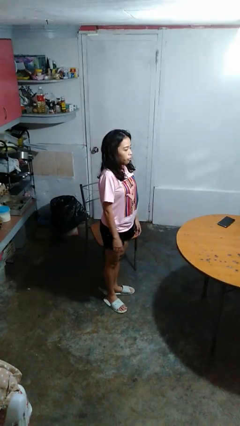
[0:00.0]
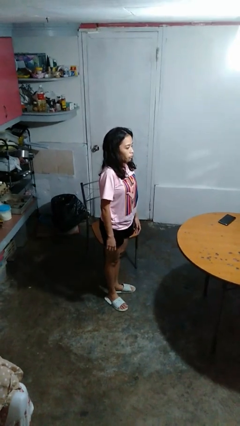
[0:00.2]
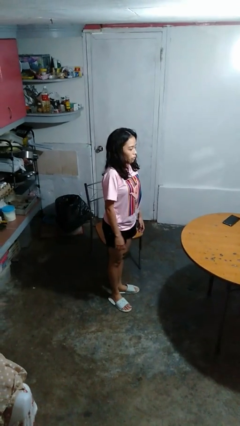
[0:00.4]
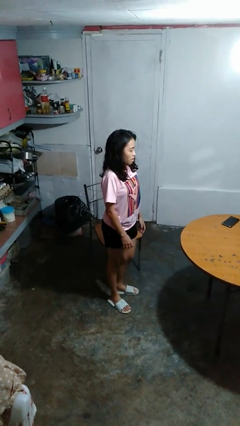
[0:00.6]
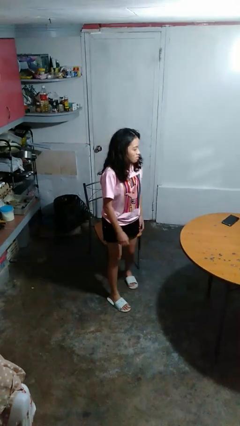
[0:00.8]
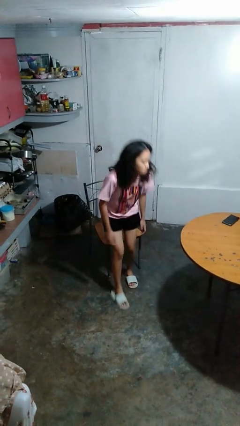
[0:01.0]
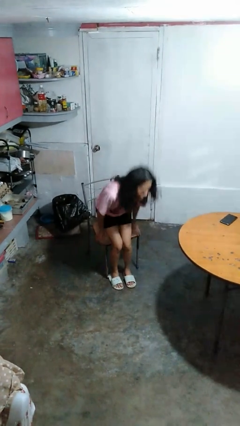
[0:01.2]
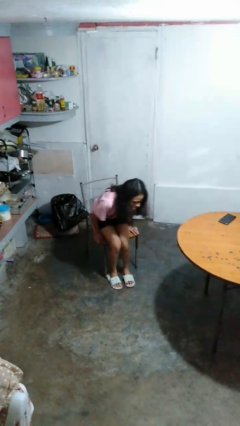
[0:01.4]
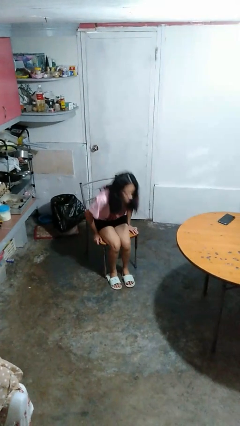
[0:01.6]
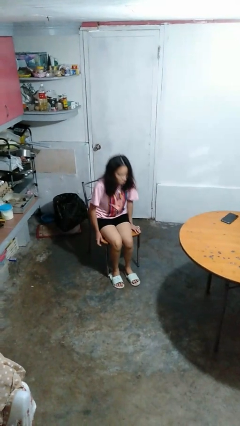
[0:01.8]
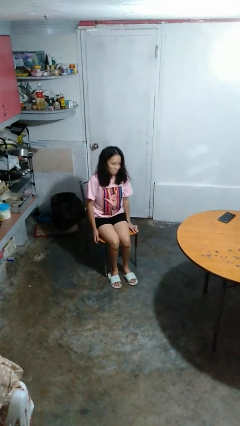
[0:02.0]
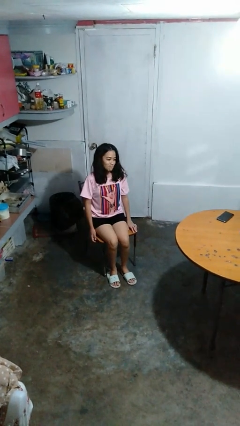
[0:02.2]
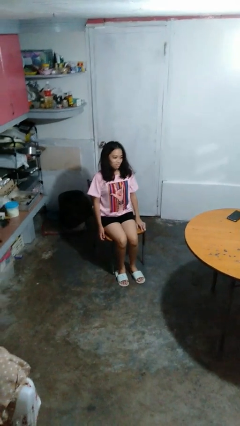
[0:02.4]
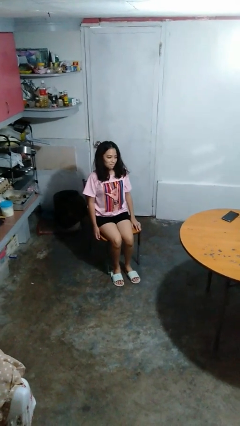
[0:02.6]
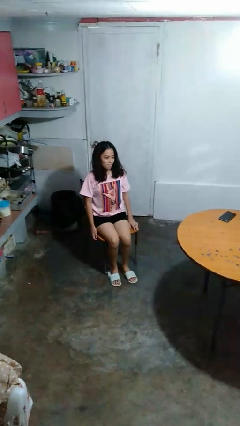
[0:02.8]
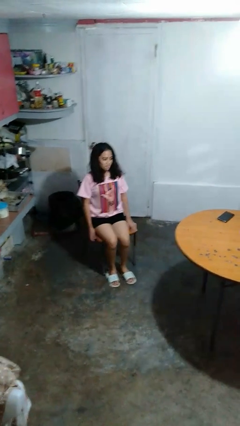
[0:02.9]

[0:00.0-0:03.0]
person sits down

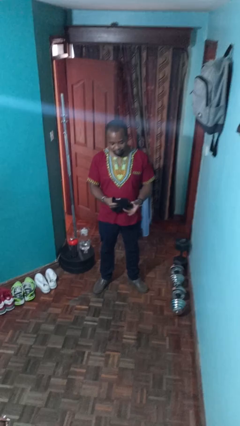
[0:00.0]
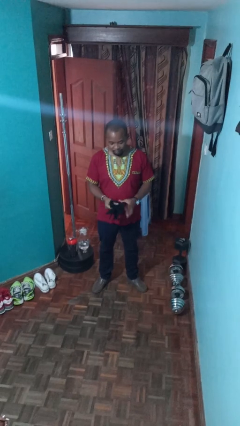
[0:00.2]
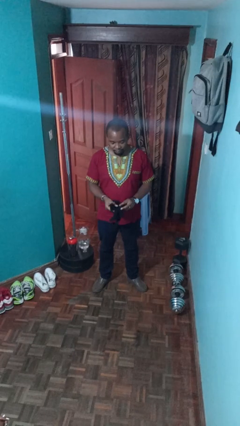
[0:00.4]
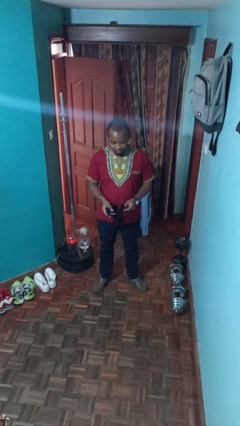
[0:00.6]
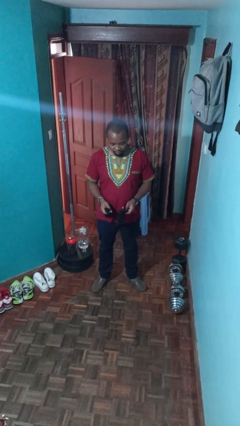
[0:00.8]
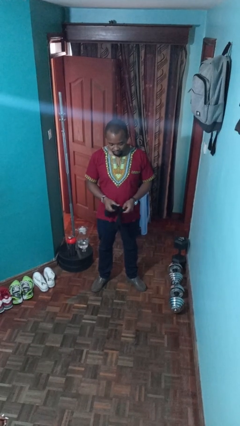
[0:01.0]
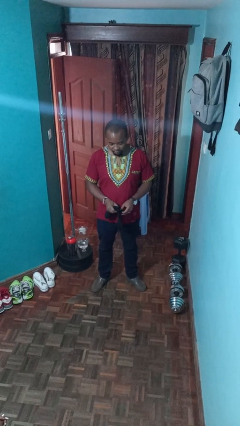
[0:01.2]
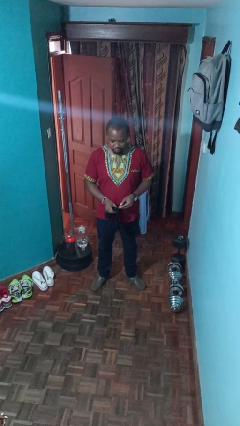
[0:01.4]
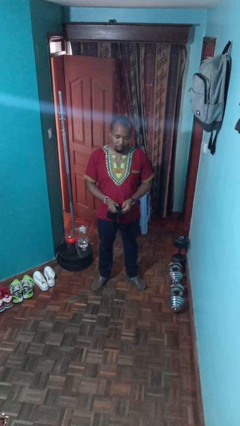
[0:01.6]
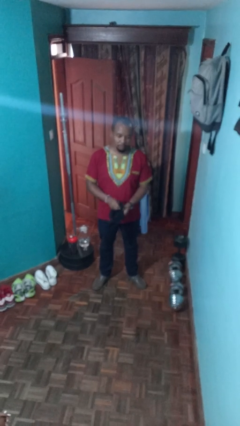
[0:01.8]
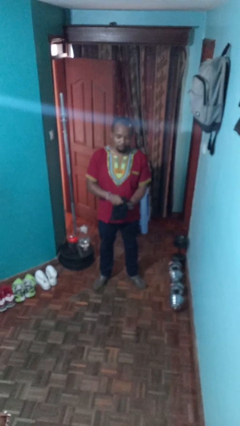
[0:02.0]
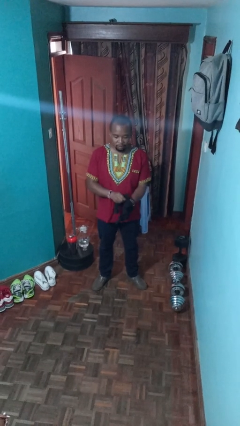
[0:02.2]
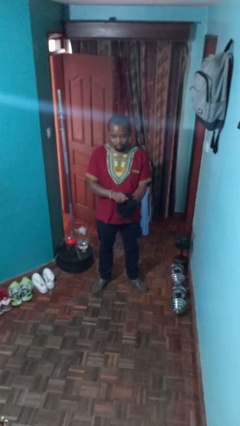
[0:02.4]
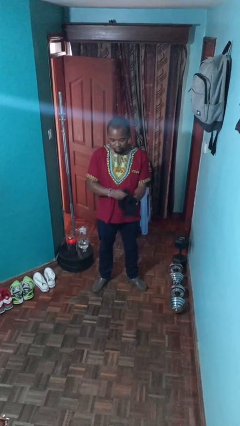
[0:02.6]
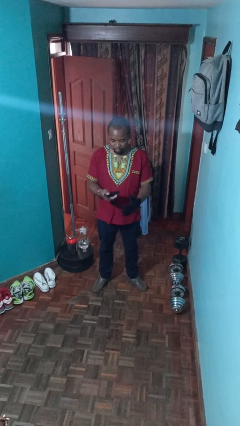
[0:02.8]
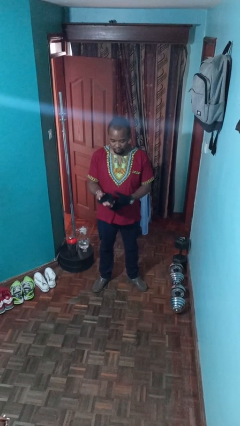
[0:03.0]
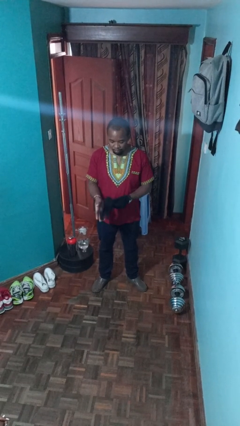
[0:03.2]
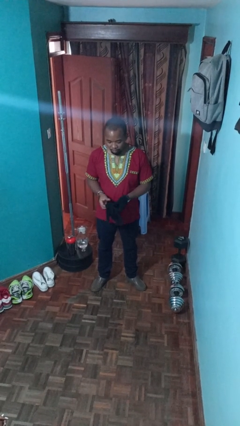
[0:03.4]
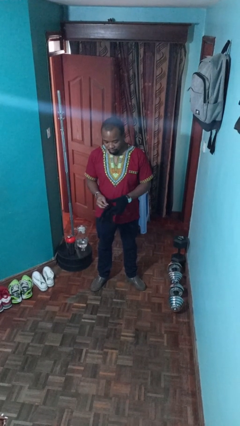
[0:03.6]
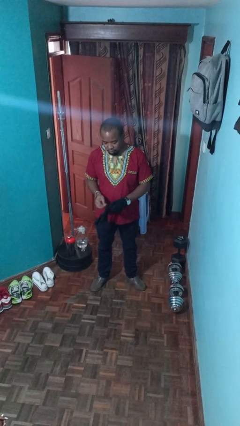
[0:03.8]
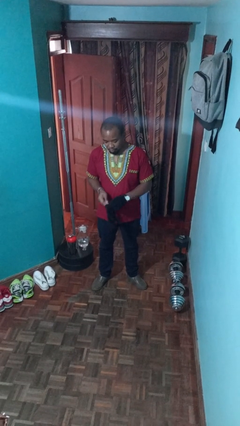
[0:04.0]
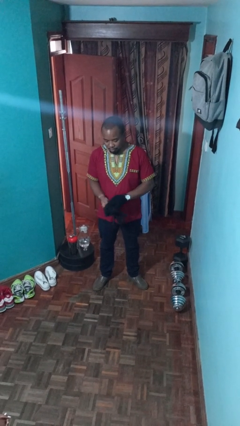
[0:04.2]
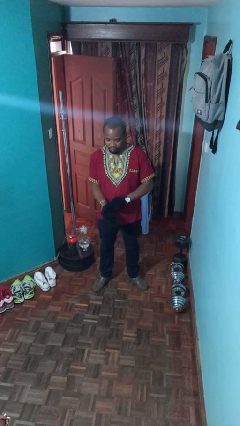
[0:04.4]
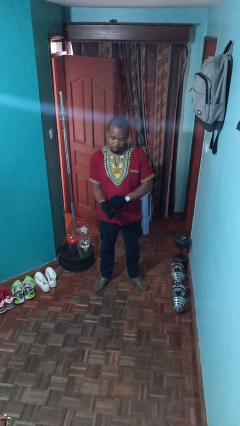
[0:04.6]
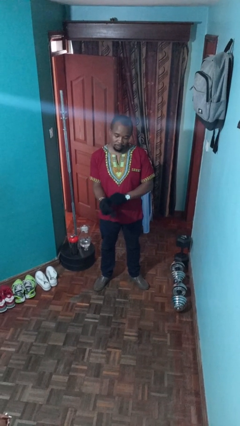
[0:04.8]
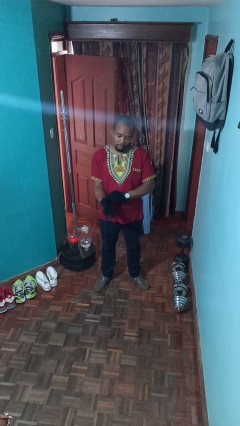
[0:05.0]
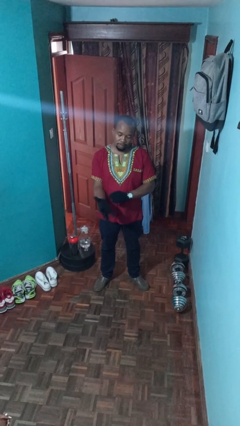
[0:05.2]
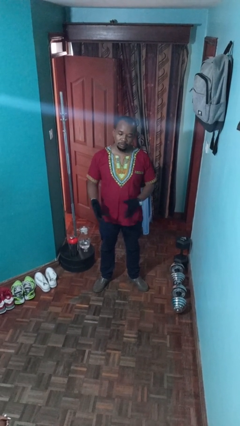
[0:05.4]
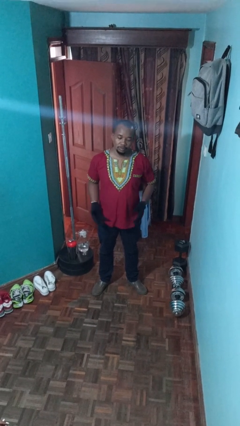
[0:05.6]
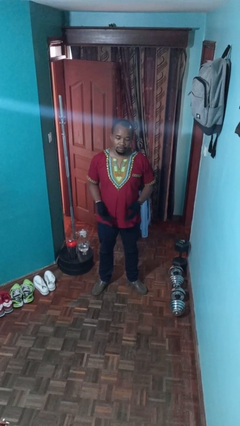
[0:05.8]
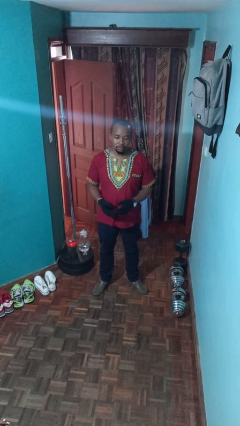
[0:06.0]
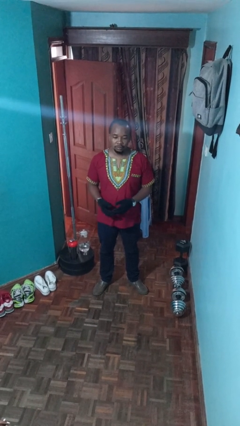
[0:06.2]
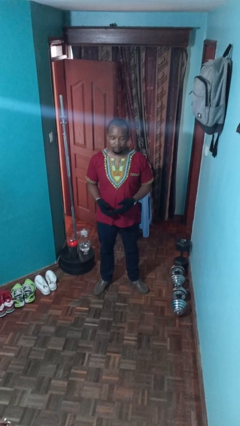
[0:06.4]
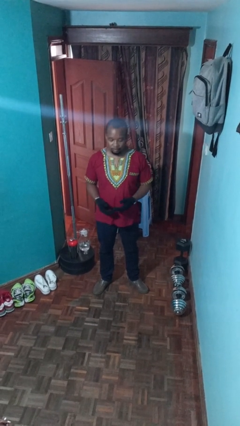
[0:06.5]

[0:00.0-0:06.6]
person puts on gloves

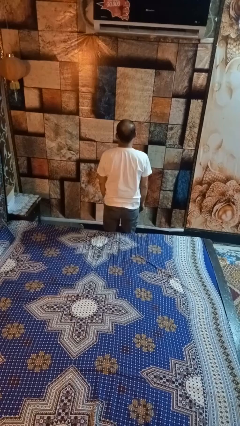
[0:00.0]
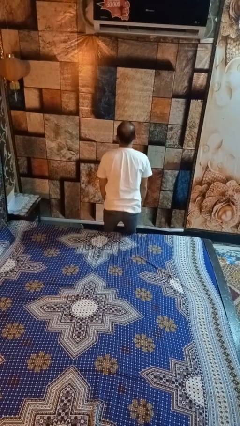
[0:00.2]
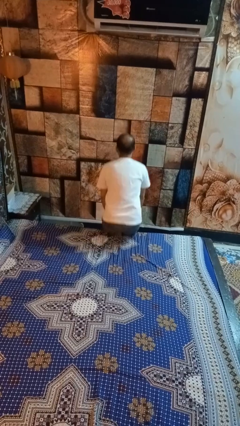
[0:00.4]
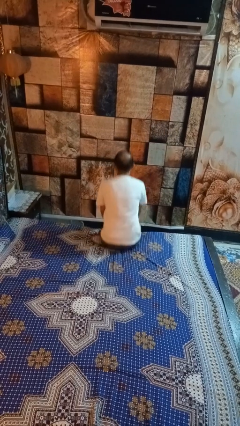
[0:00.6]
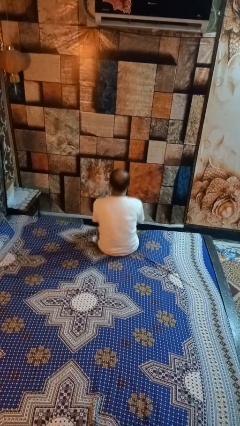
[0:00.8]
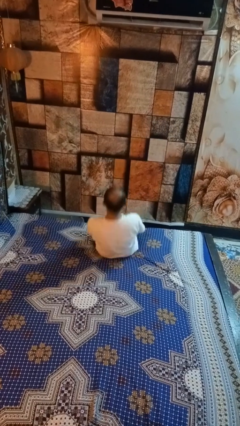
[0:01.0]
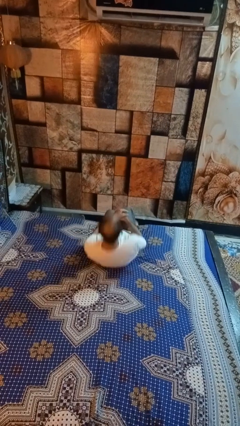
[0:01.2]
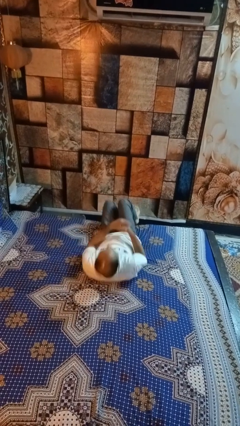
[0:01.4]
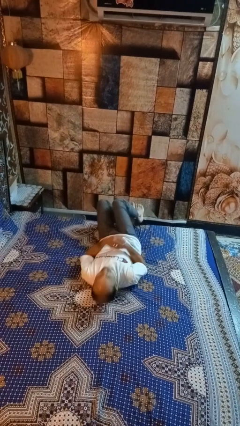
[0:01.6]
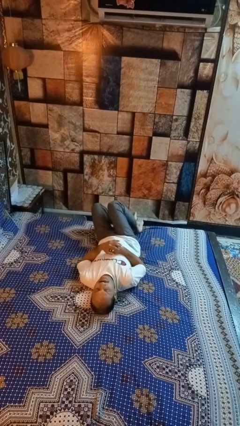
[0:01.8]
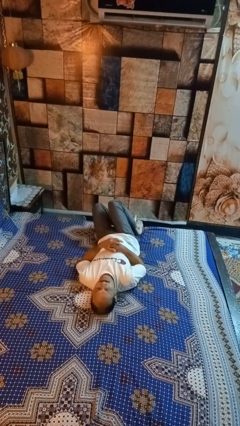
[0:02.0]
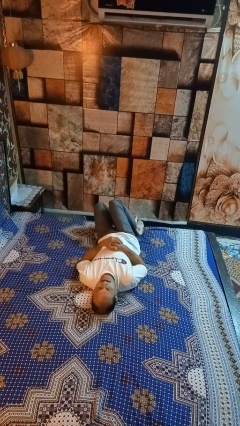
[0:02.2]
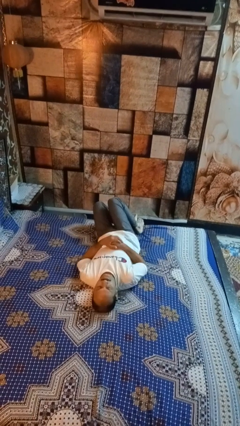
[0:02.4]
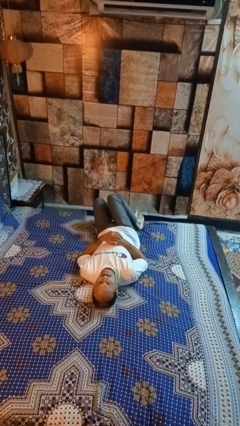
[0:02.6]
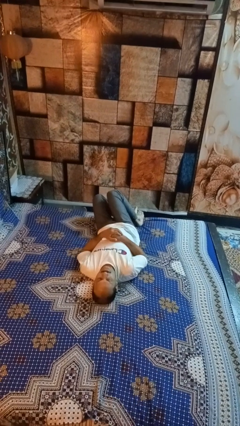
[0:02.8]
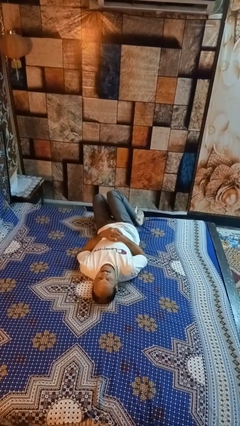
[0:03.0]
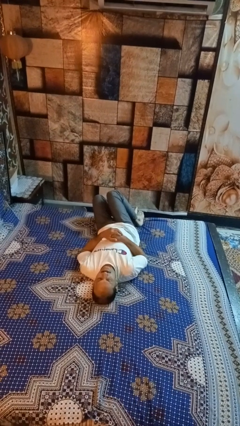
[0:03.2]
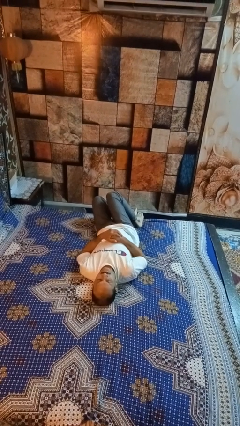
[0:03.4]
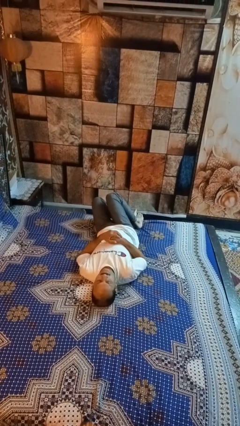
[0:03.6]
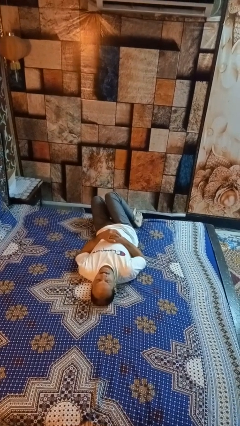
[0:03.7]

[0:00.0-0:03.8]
person lies down on bed

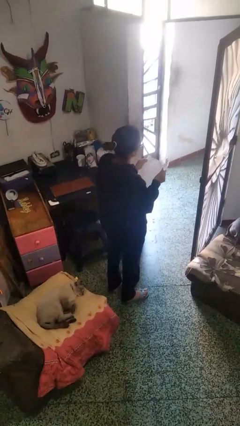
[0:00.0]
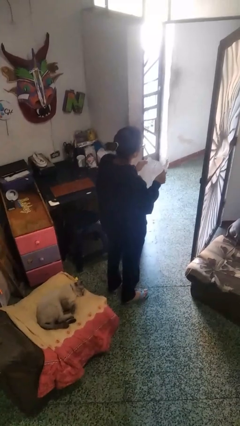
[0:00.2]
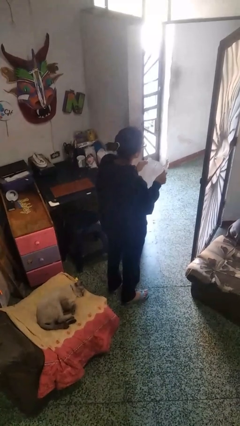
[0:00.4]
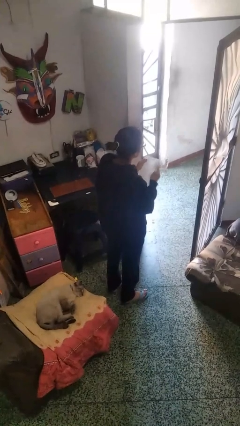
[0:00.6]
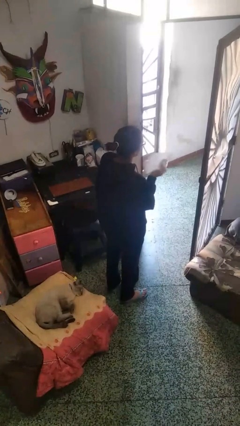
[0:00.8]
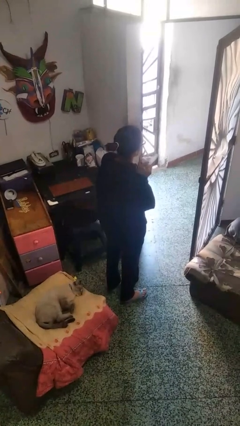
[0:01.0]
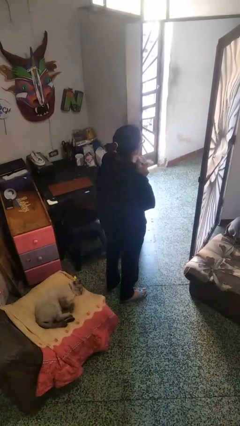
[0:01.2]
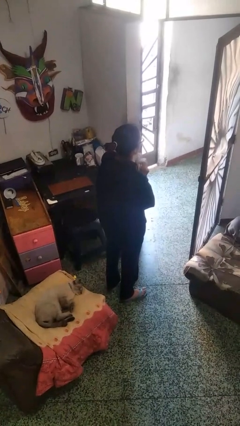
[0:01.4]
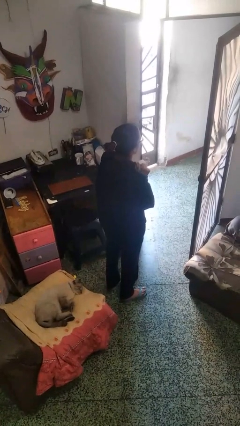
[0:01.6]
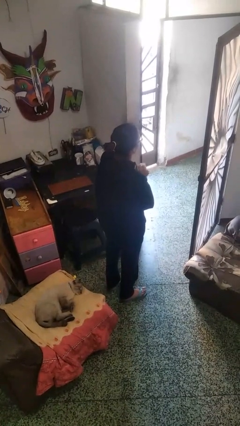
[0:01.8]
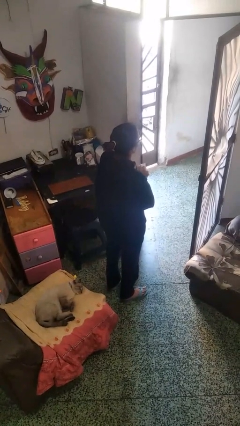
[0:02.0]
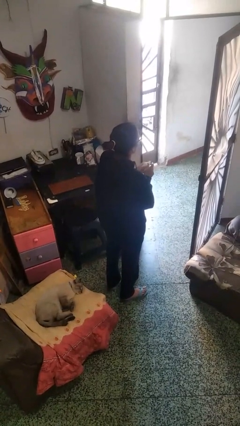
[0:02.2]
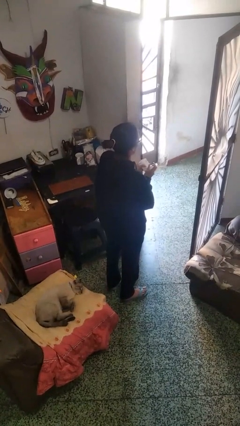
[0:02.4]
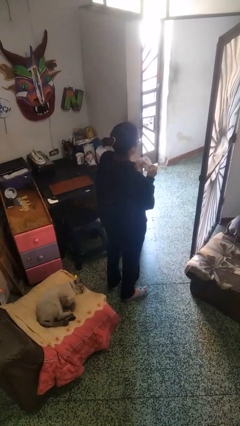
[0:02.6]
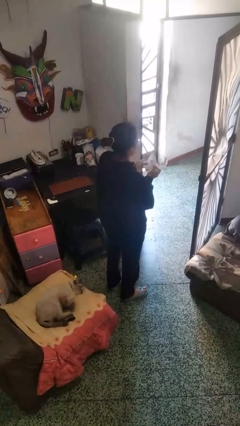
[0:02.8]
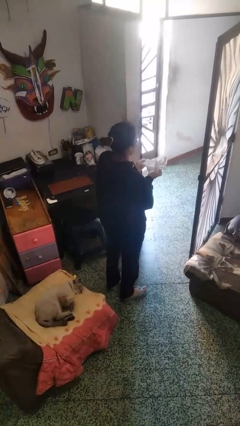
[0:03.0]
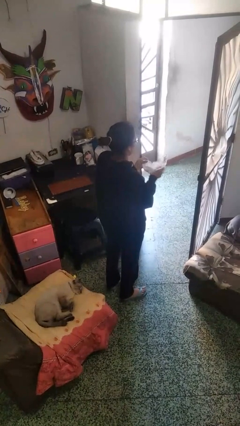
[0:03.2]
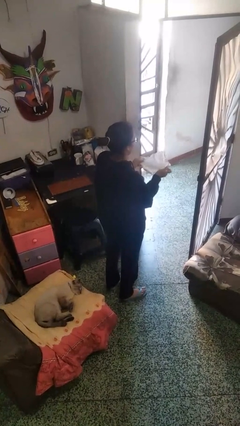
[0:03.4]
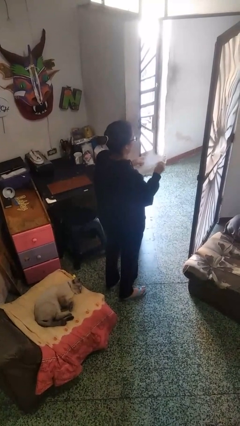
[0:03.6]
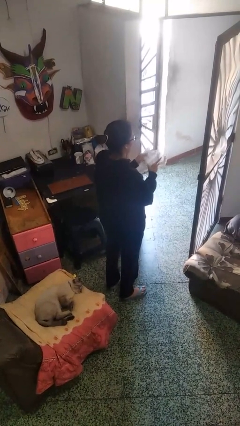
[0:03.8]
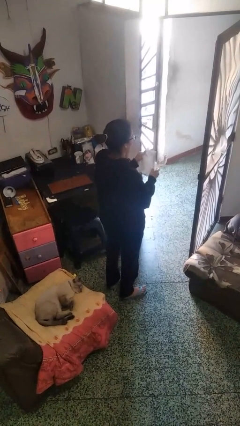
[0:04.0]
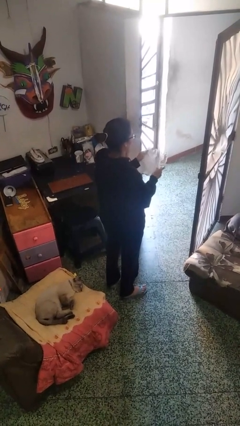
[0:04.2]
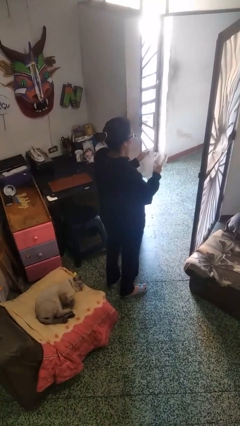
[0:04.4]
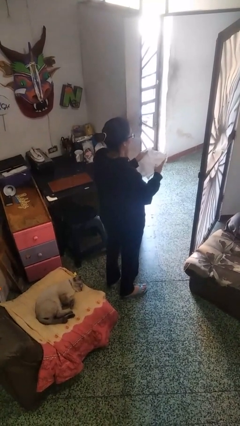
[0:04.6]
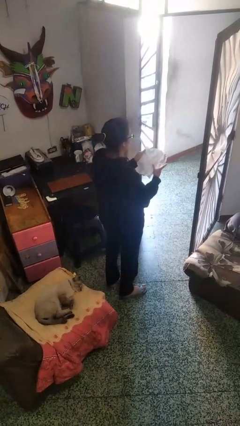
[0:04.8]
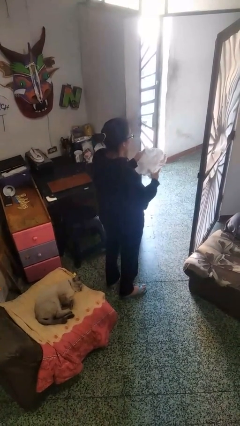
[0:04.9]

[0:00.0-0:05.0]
person crumples paper
